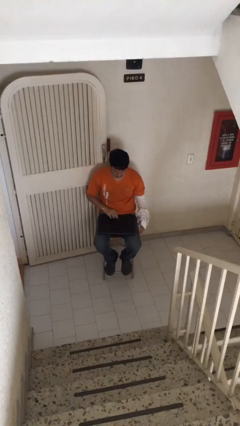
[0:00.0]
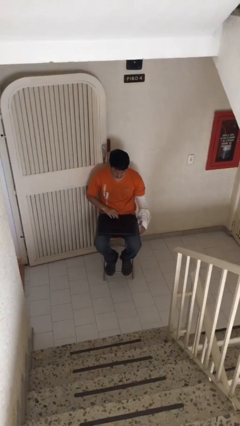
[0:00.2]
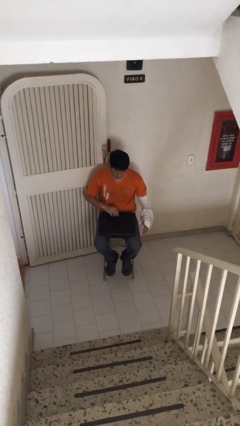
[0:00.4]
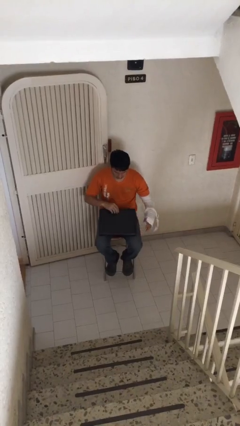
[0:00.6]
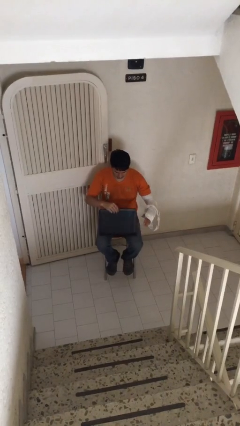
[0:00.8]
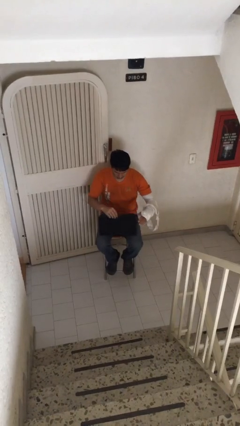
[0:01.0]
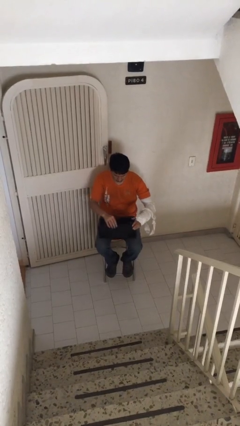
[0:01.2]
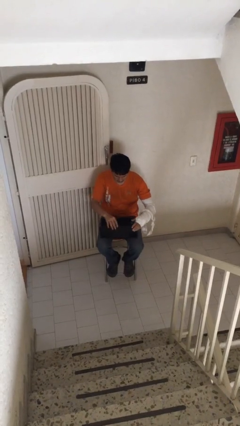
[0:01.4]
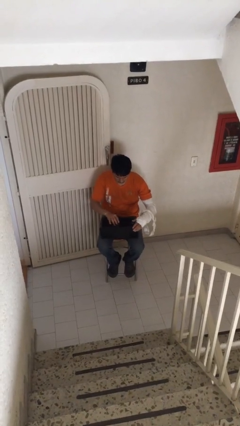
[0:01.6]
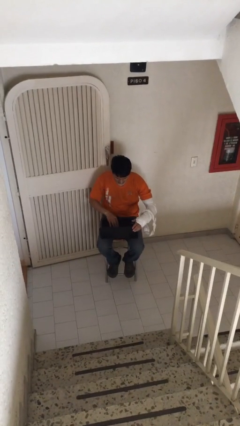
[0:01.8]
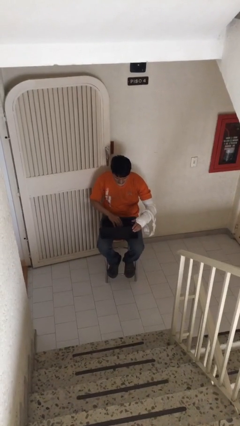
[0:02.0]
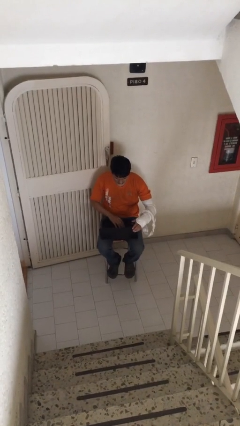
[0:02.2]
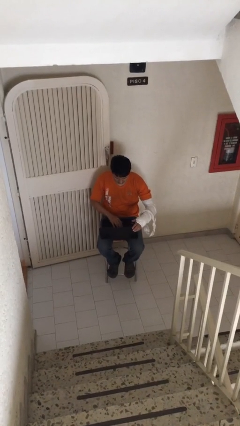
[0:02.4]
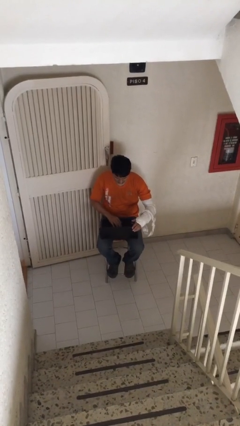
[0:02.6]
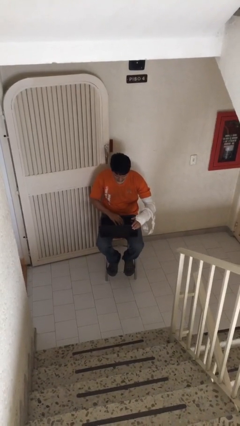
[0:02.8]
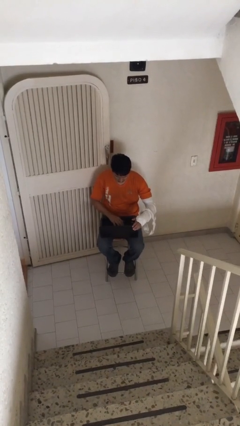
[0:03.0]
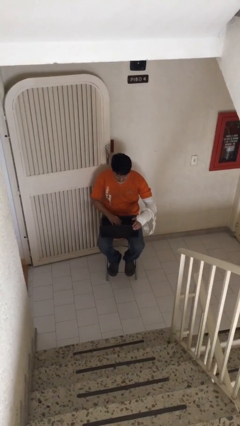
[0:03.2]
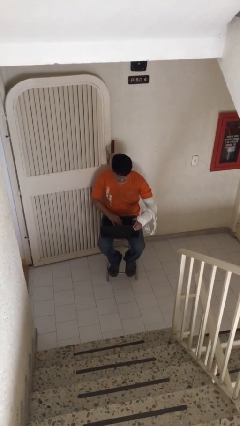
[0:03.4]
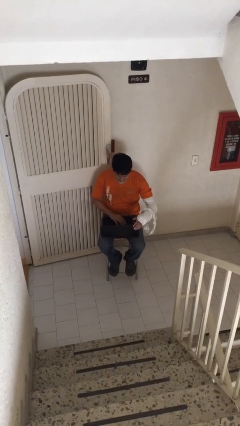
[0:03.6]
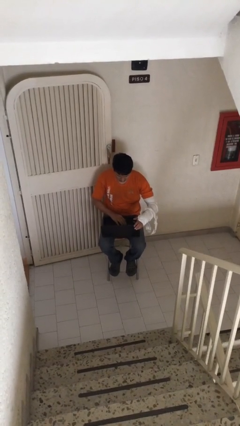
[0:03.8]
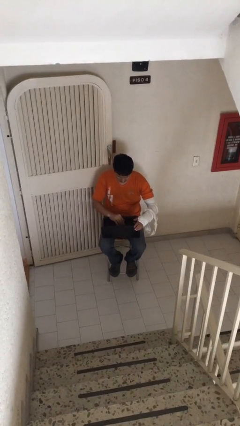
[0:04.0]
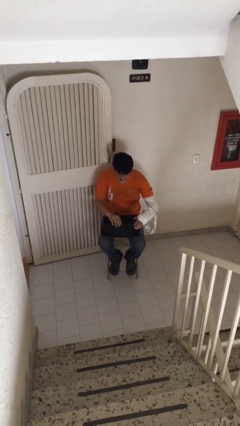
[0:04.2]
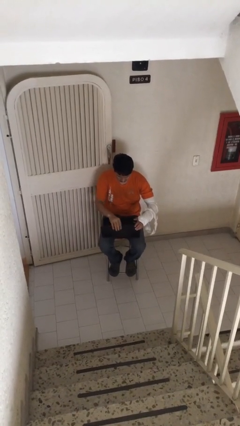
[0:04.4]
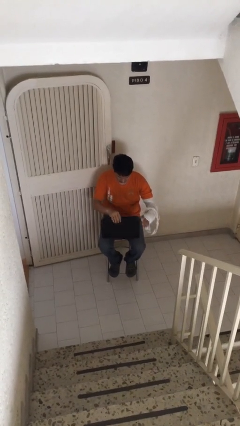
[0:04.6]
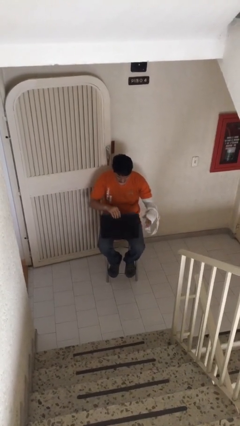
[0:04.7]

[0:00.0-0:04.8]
person interacts with laptop

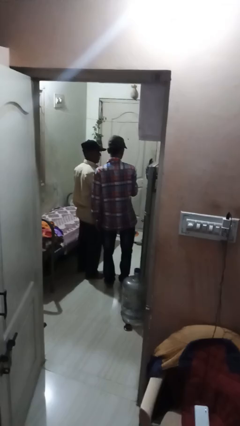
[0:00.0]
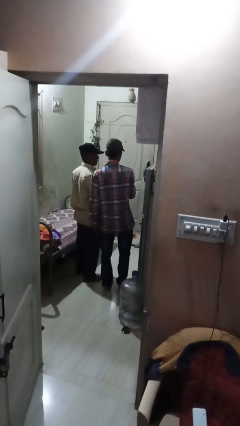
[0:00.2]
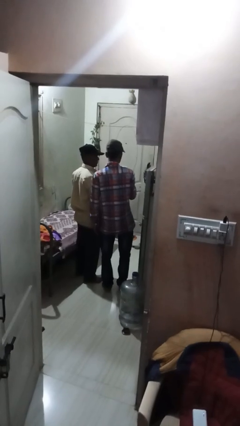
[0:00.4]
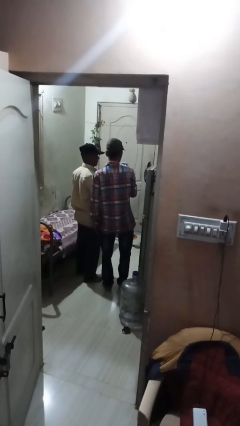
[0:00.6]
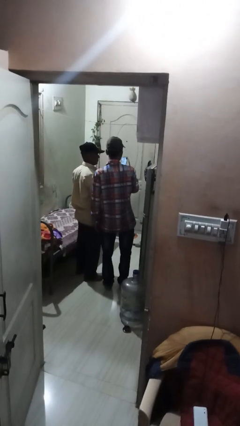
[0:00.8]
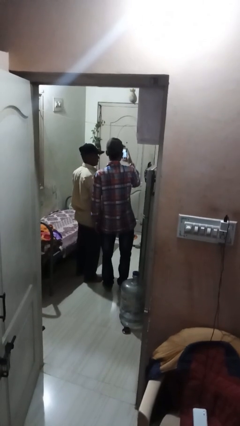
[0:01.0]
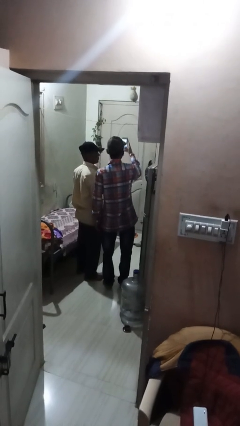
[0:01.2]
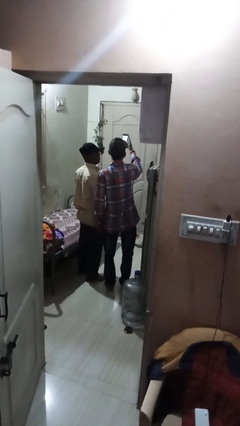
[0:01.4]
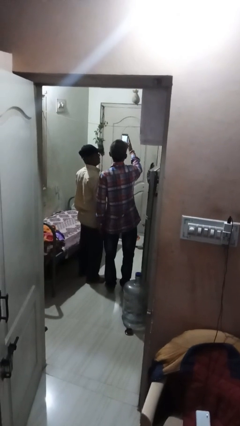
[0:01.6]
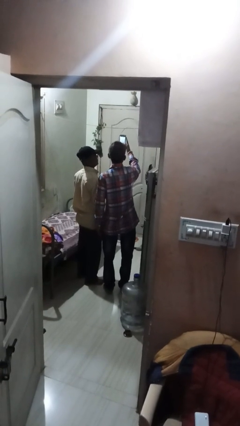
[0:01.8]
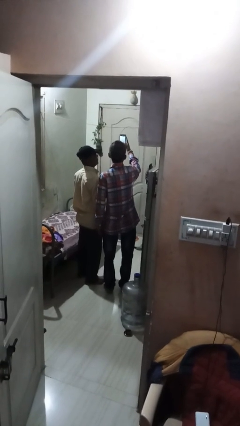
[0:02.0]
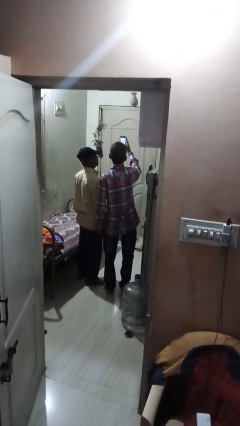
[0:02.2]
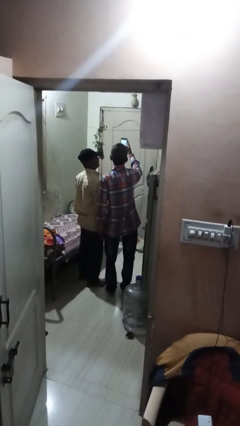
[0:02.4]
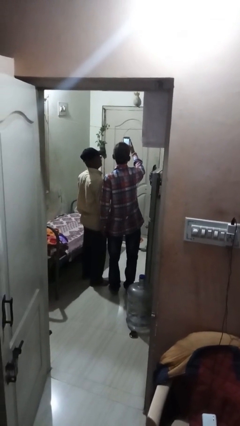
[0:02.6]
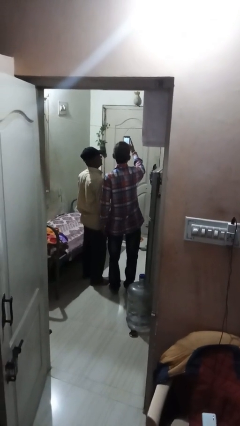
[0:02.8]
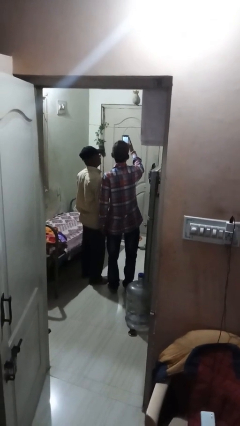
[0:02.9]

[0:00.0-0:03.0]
person takes selfie with person

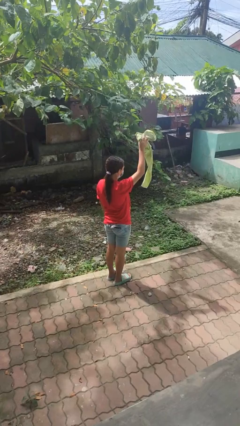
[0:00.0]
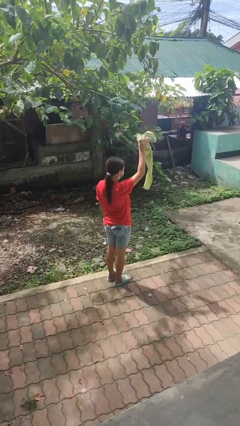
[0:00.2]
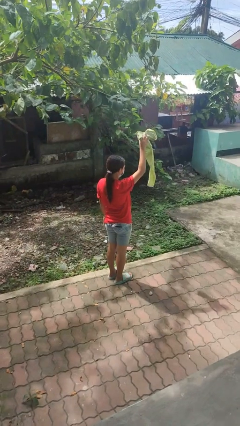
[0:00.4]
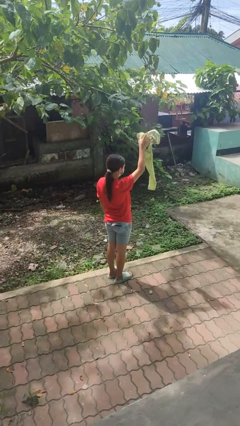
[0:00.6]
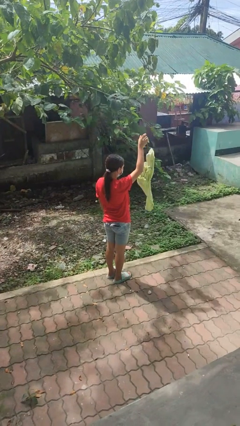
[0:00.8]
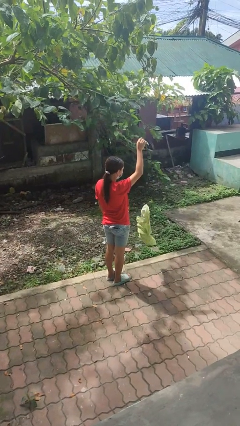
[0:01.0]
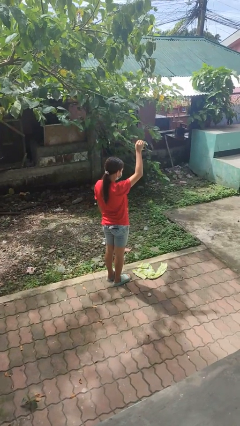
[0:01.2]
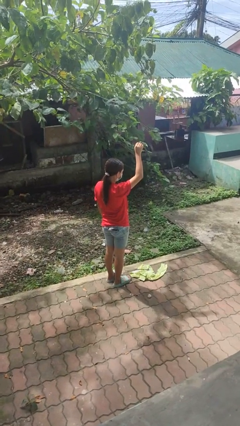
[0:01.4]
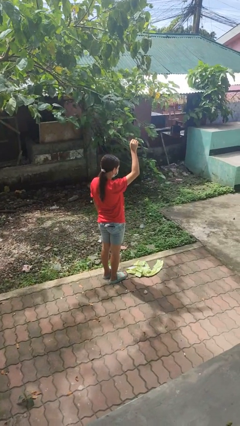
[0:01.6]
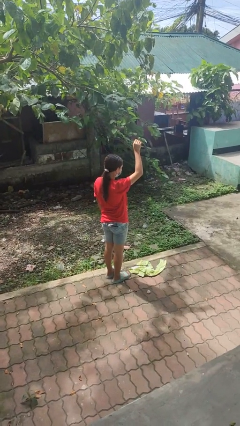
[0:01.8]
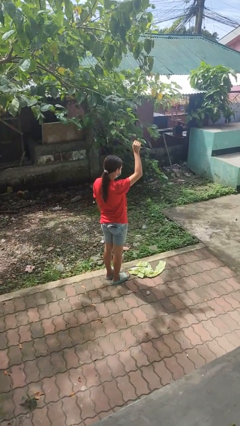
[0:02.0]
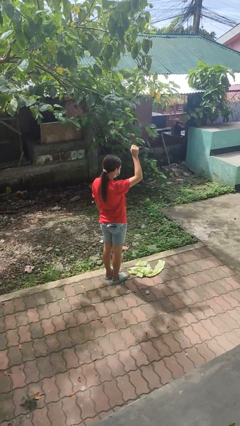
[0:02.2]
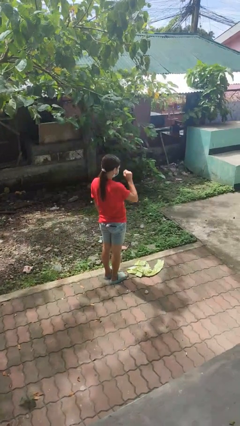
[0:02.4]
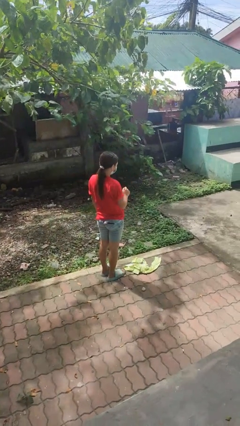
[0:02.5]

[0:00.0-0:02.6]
person drops object

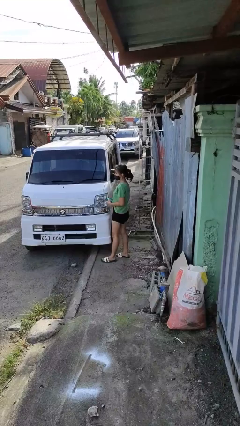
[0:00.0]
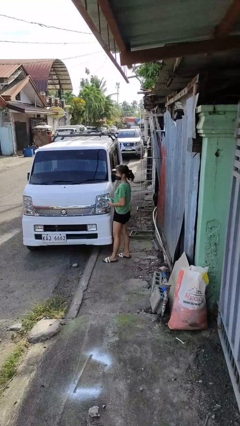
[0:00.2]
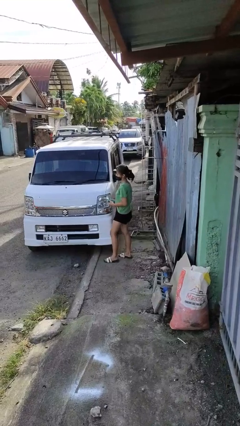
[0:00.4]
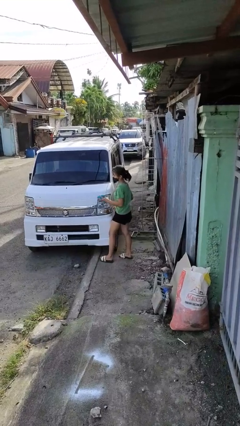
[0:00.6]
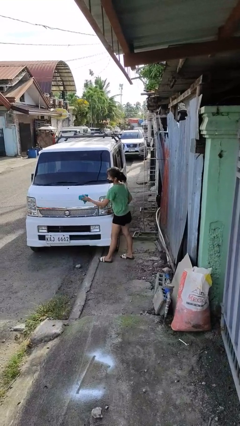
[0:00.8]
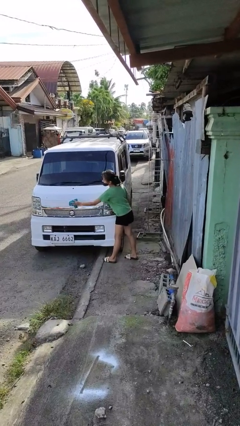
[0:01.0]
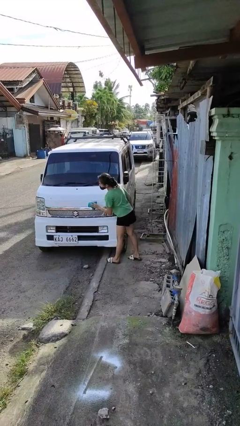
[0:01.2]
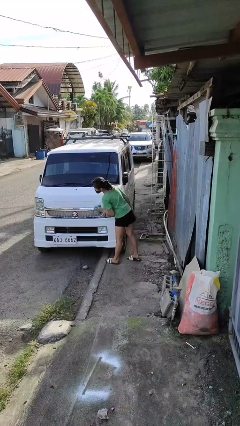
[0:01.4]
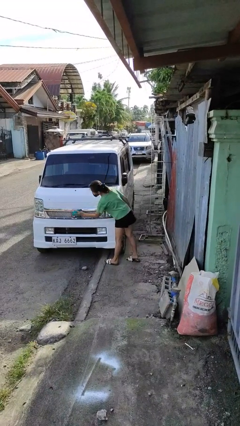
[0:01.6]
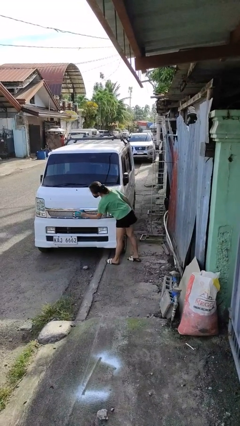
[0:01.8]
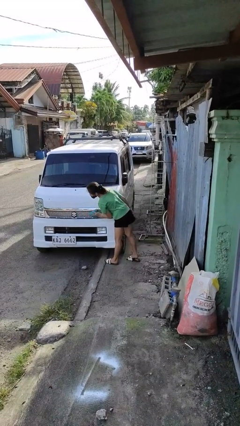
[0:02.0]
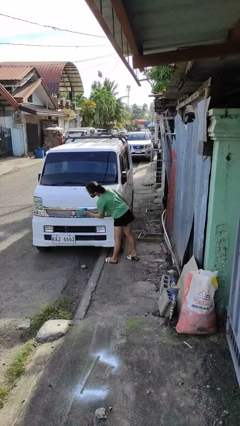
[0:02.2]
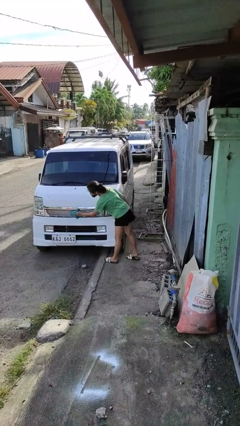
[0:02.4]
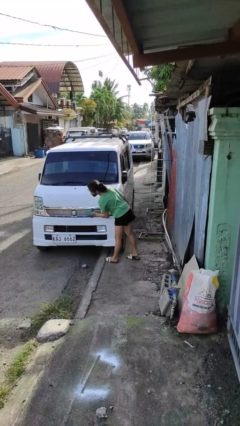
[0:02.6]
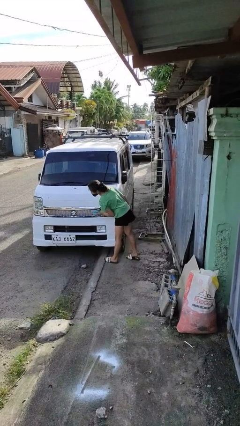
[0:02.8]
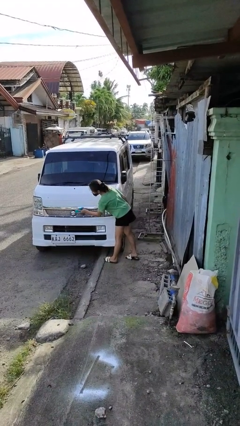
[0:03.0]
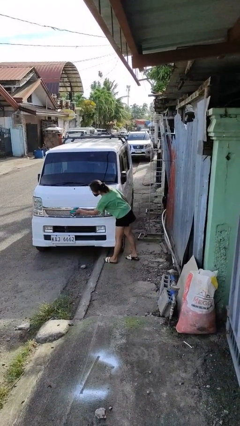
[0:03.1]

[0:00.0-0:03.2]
person polishes car with rag

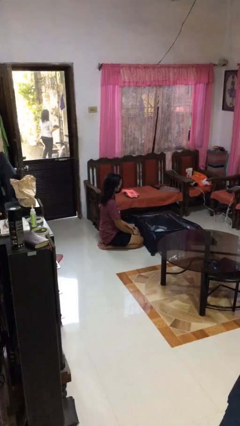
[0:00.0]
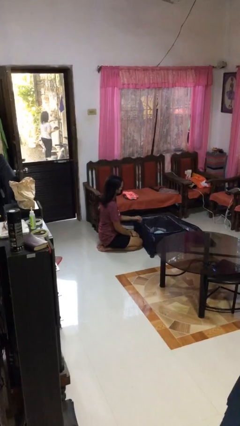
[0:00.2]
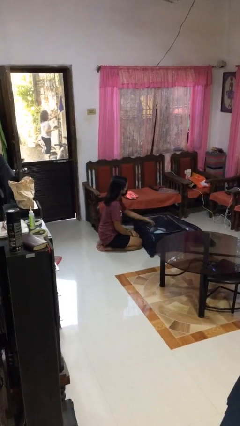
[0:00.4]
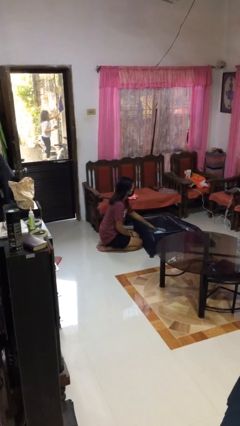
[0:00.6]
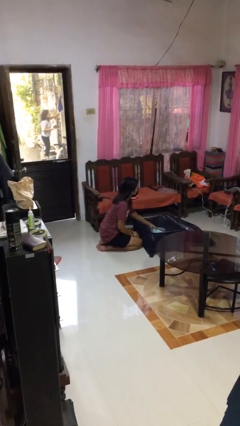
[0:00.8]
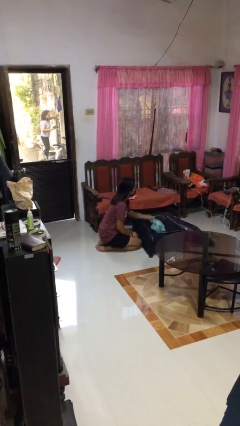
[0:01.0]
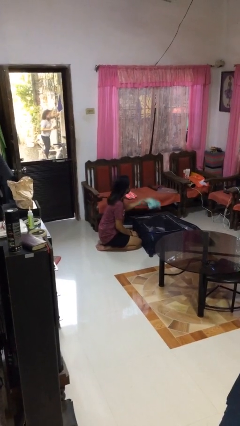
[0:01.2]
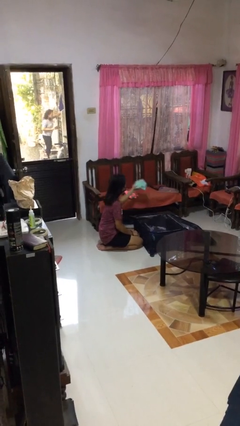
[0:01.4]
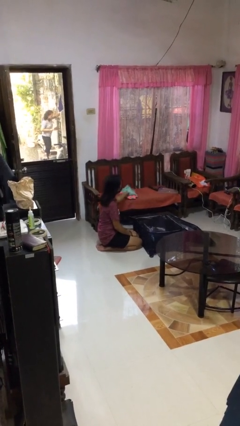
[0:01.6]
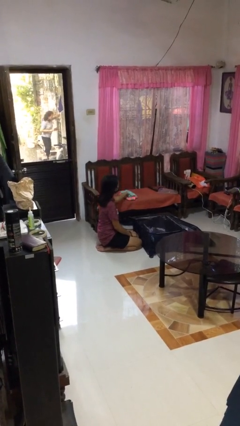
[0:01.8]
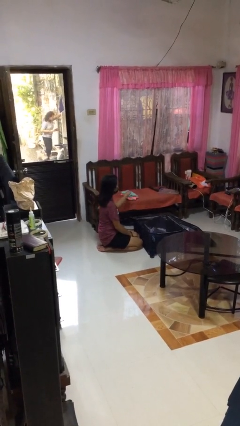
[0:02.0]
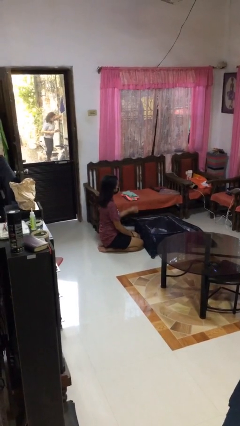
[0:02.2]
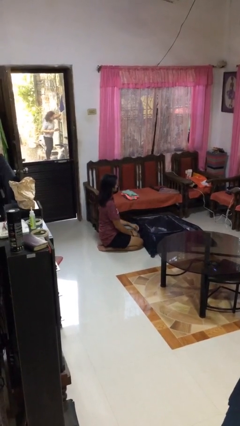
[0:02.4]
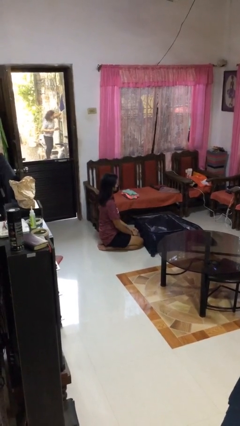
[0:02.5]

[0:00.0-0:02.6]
person unloads clothes from suitcase

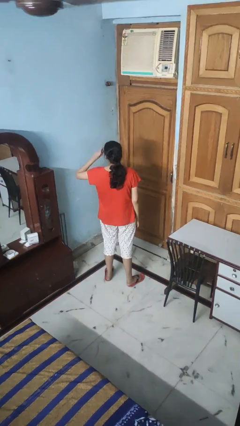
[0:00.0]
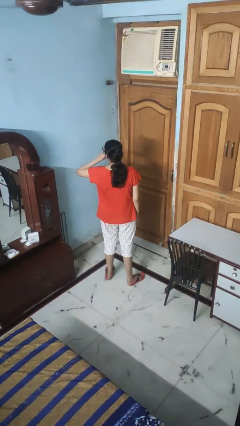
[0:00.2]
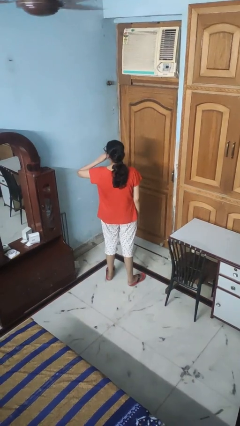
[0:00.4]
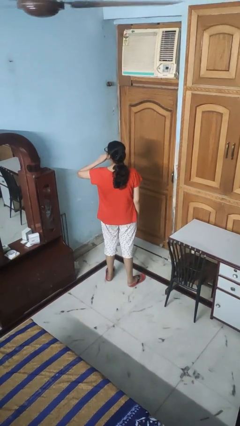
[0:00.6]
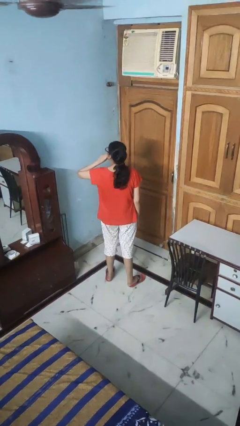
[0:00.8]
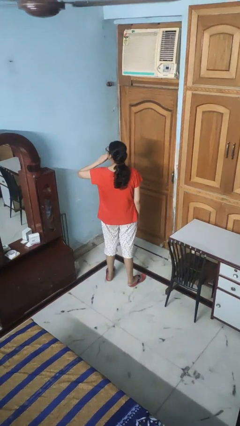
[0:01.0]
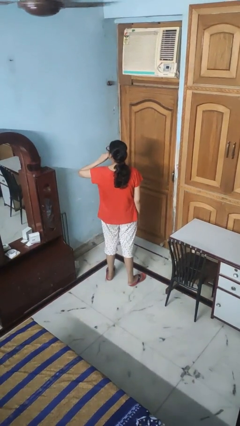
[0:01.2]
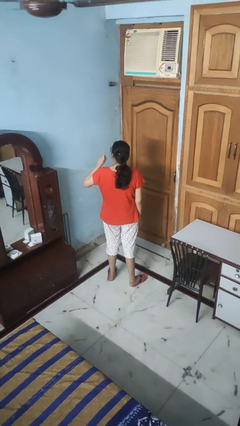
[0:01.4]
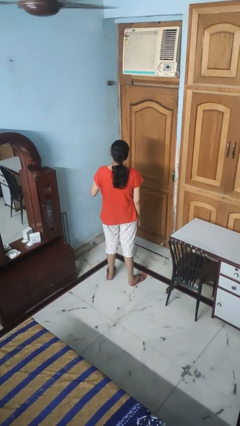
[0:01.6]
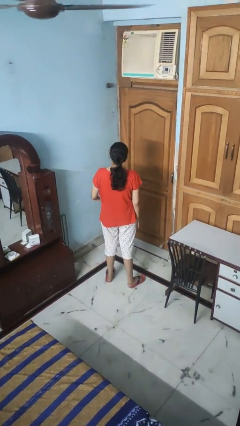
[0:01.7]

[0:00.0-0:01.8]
person gestures be quiet
